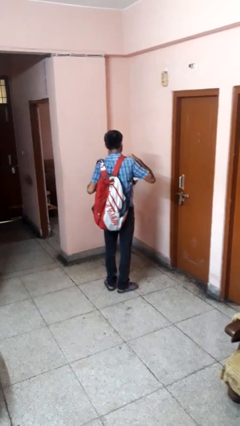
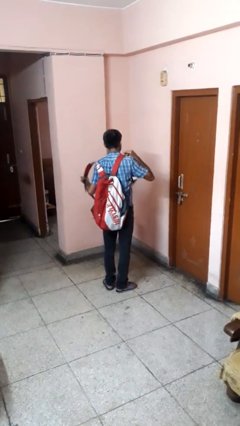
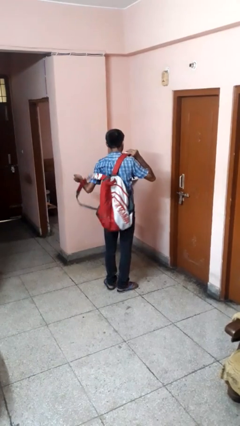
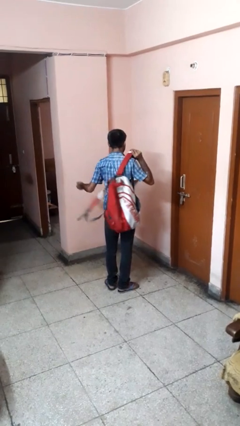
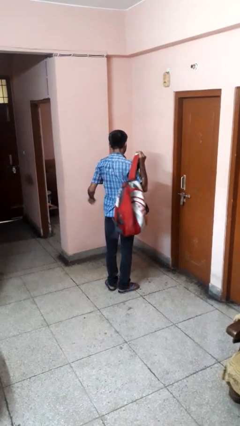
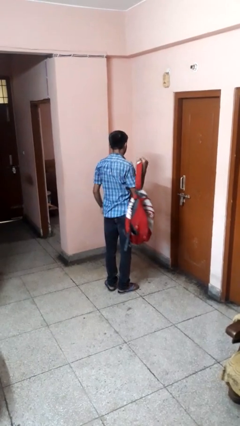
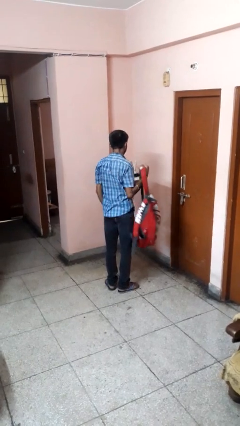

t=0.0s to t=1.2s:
person takes off backpack

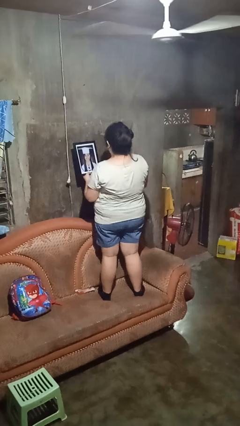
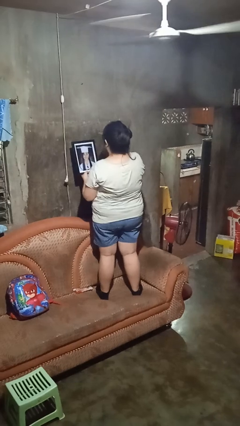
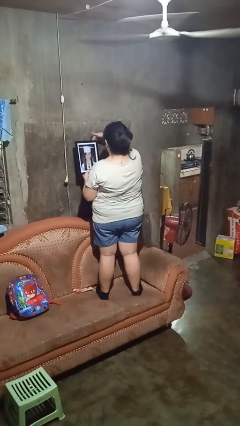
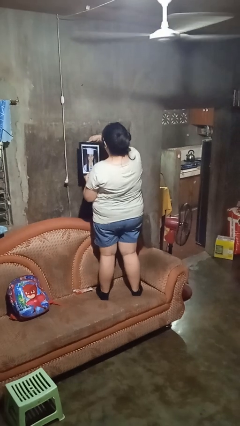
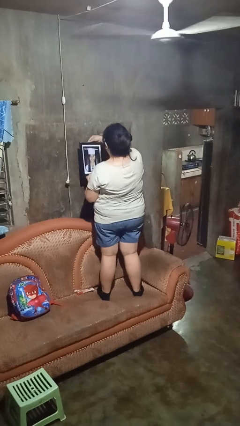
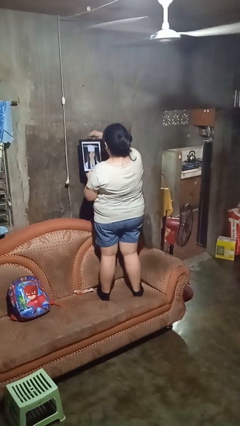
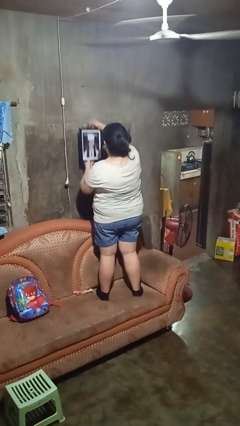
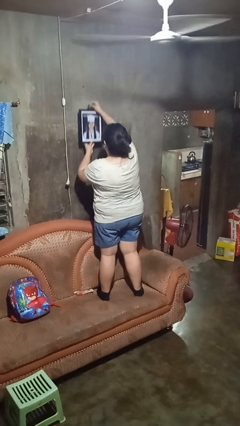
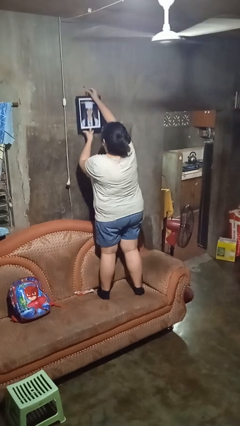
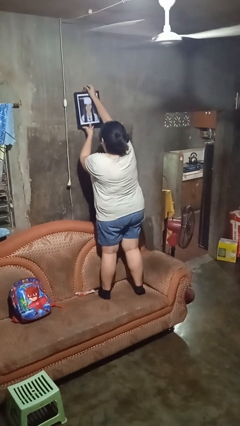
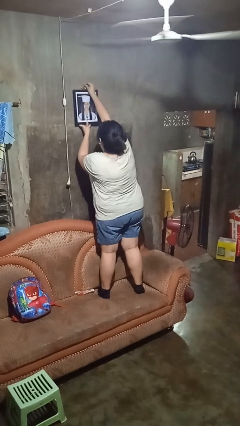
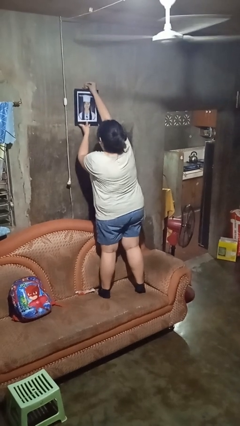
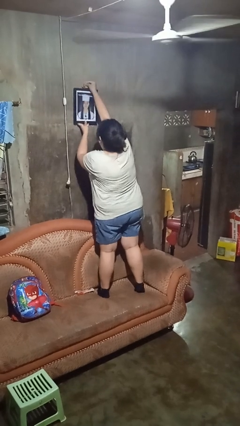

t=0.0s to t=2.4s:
person puts up picture frame

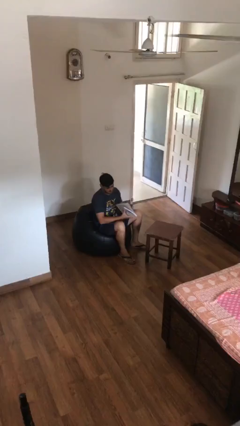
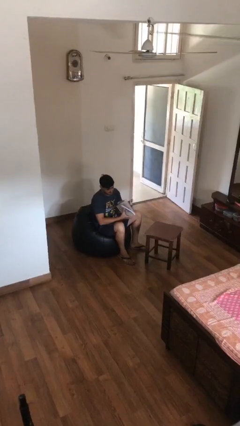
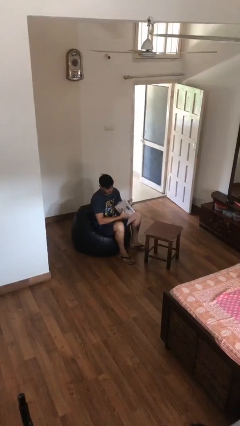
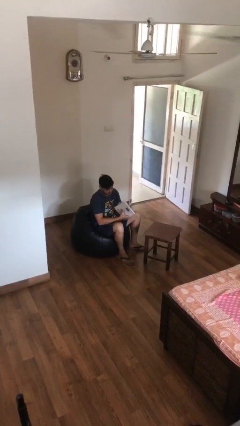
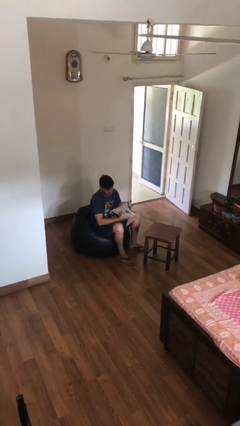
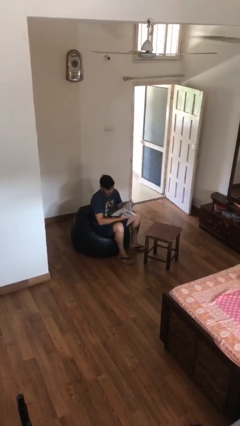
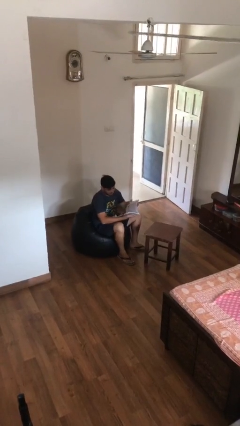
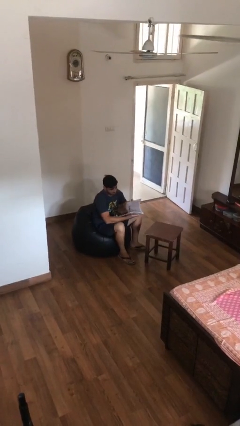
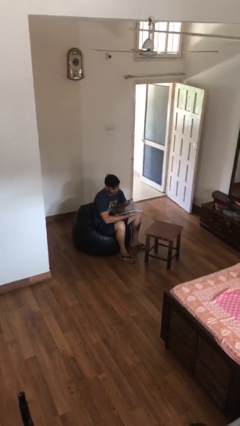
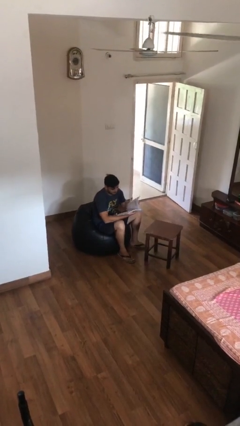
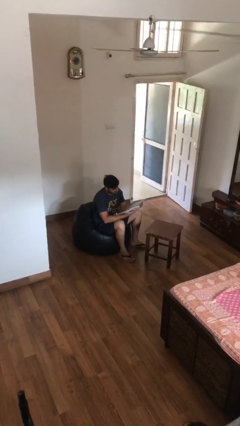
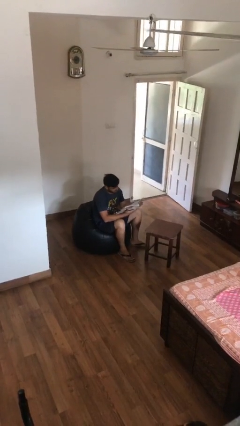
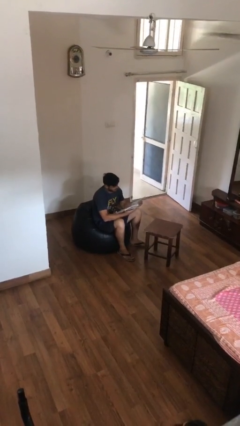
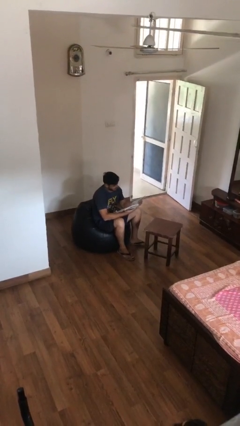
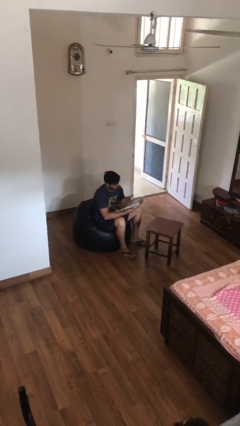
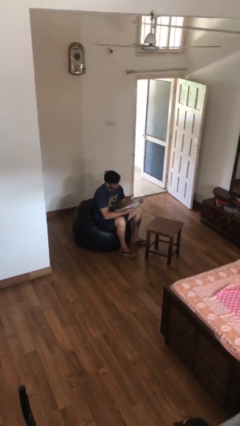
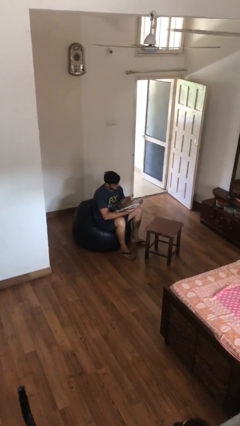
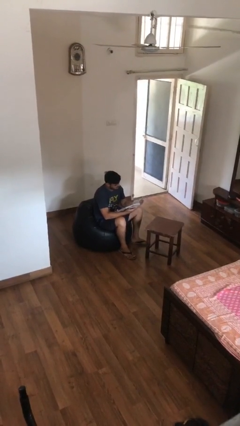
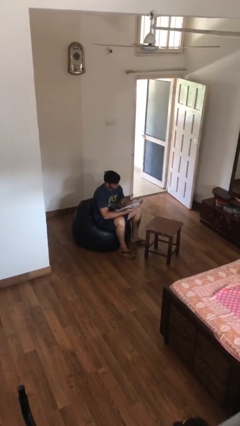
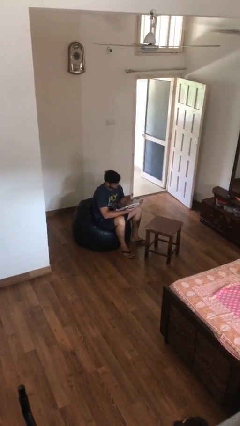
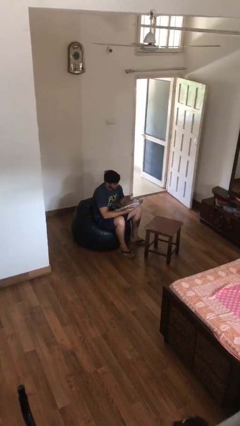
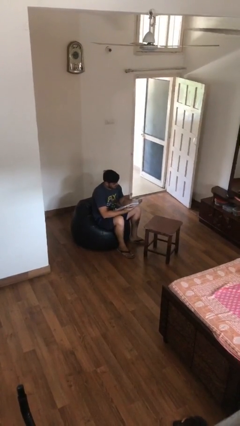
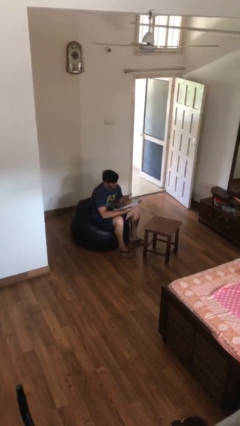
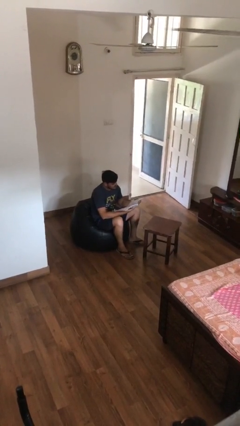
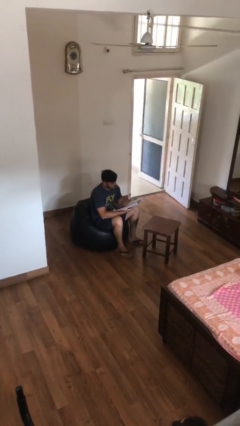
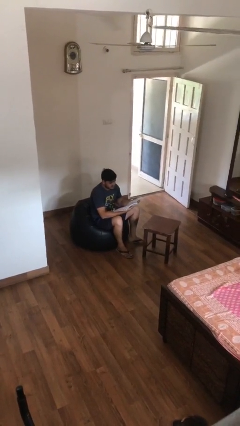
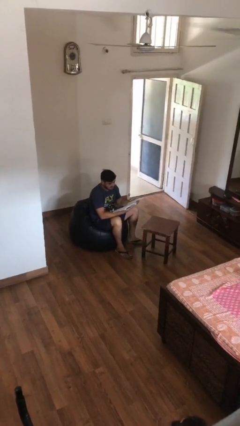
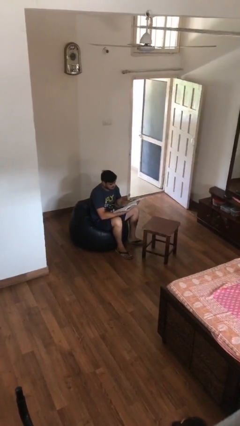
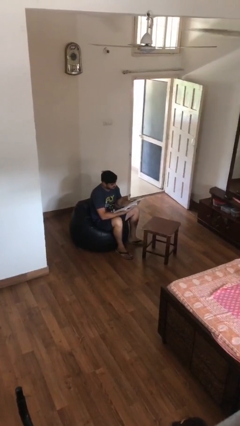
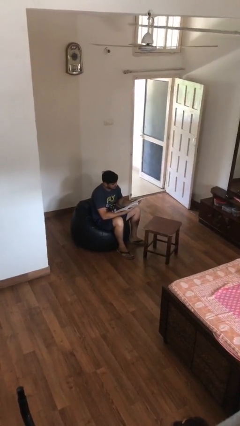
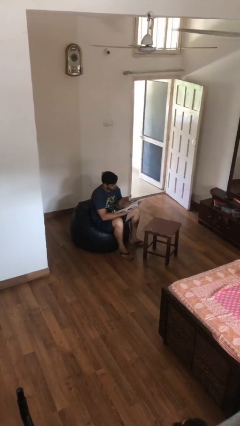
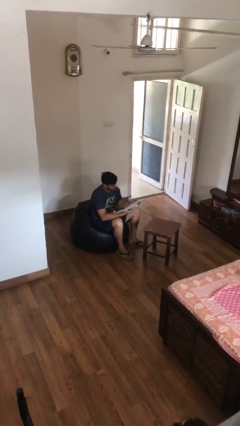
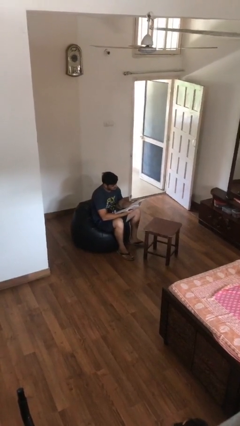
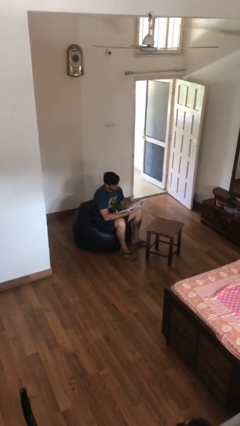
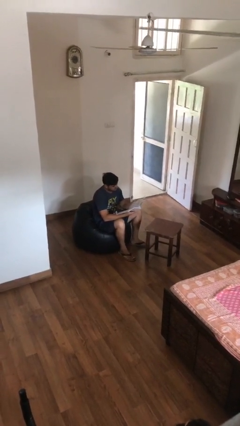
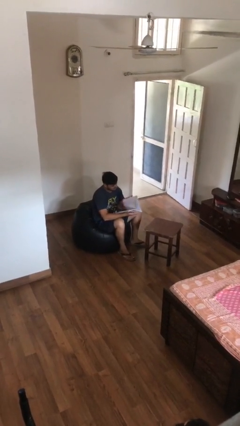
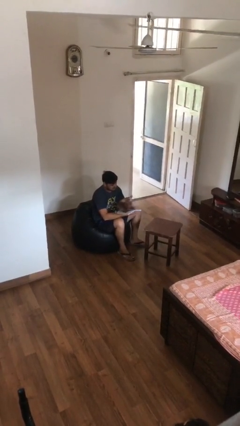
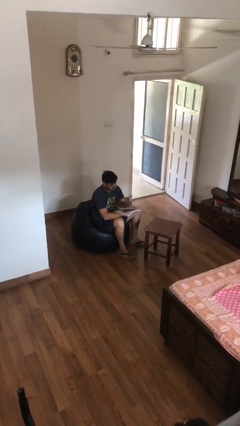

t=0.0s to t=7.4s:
person reads document

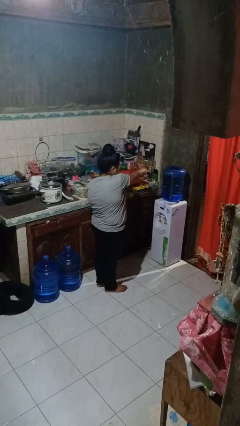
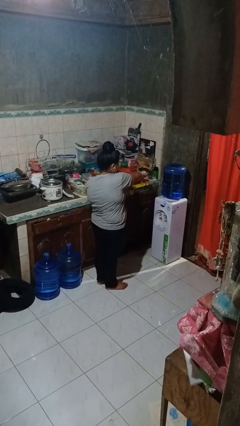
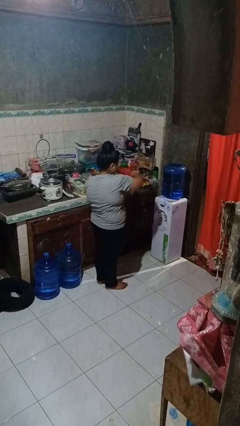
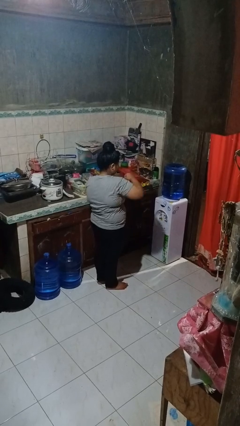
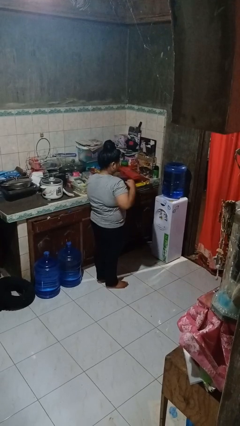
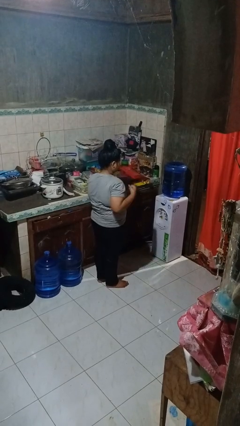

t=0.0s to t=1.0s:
person punches

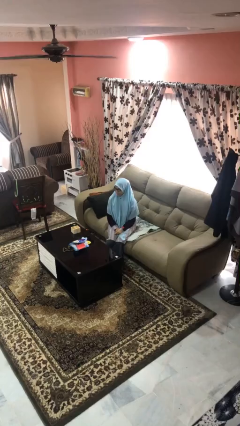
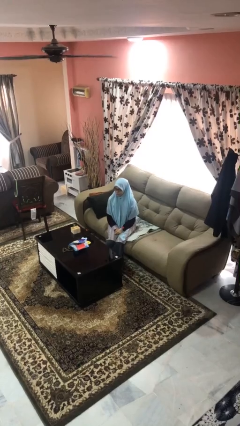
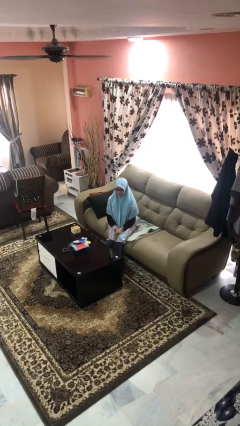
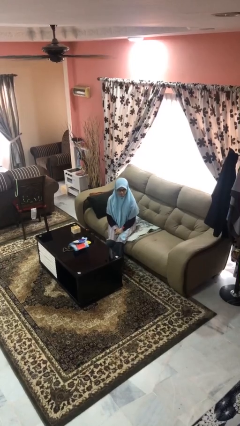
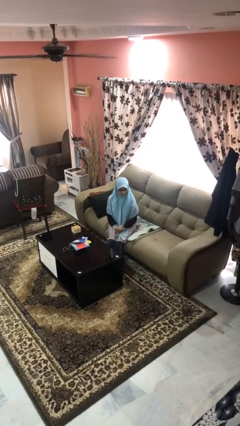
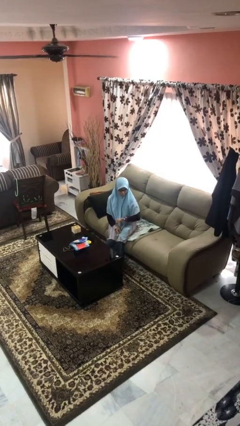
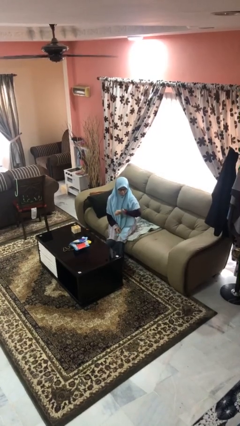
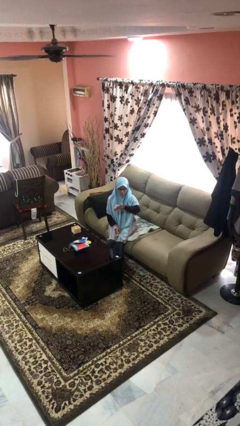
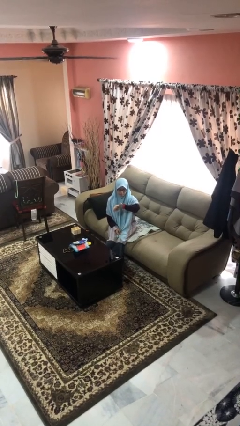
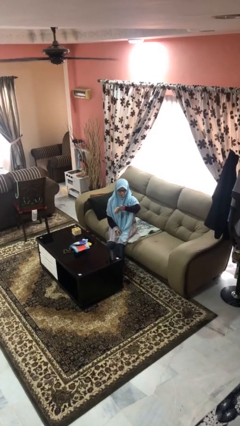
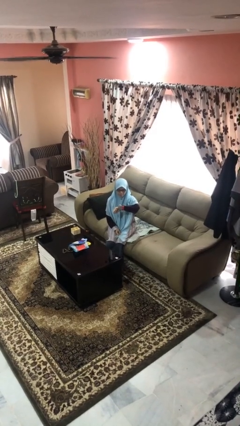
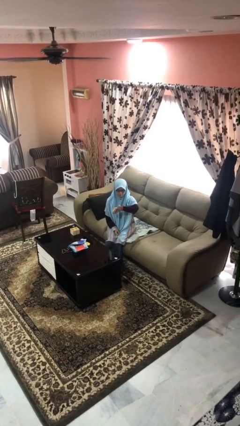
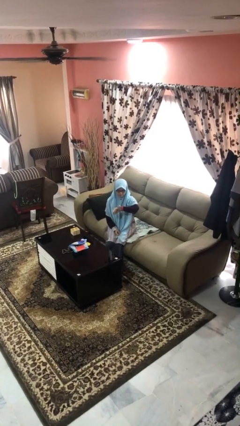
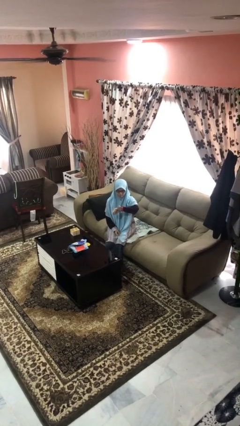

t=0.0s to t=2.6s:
person looks at wristwatch

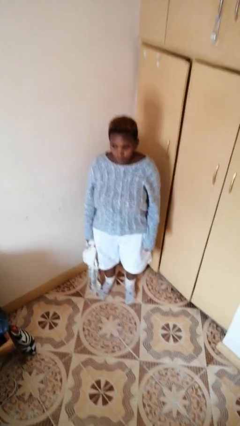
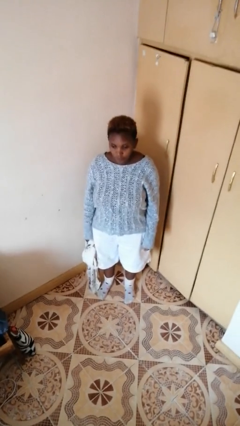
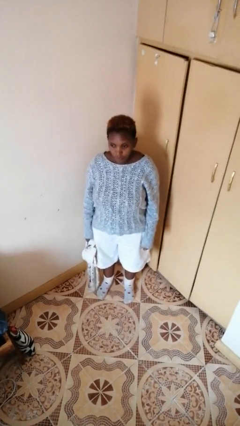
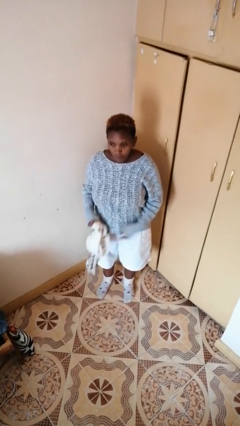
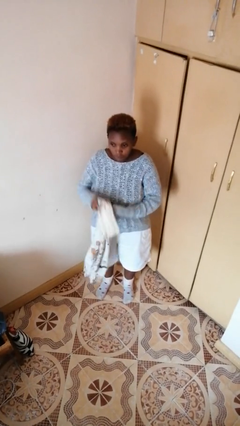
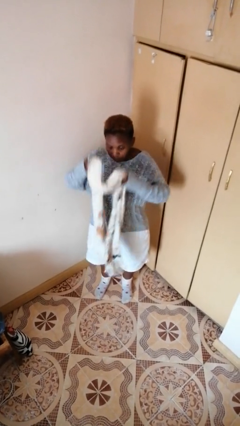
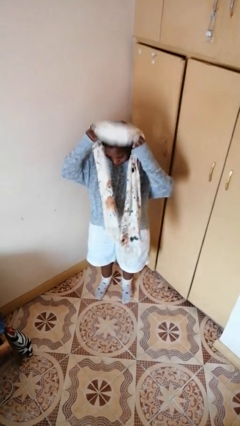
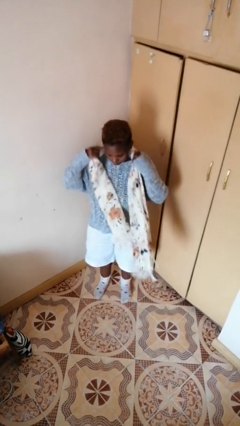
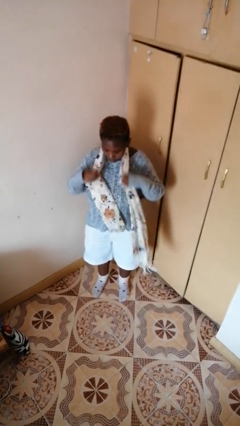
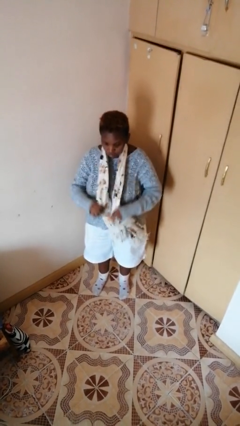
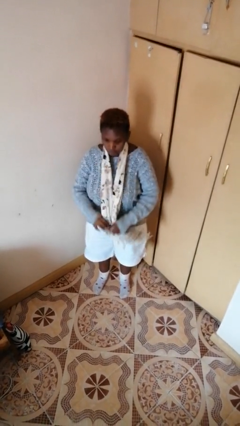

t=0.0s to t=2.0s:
person puts on scarf

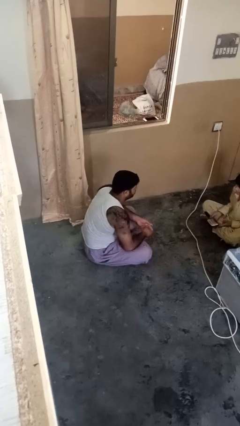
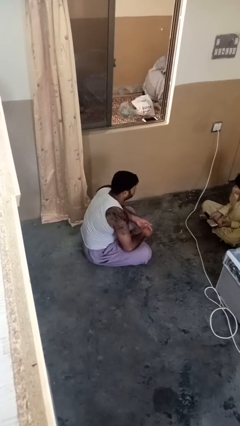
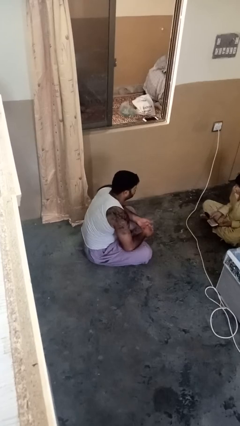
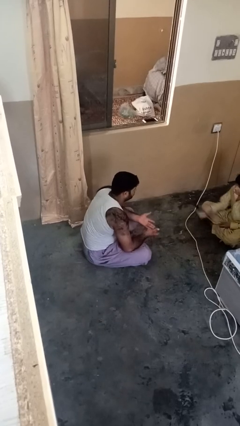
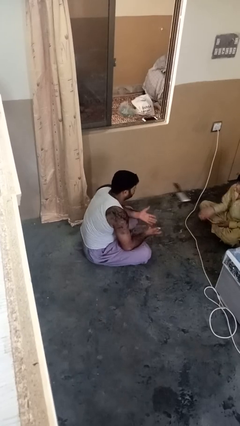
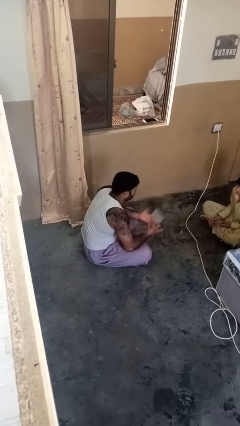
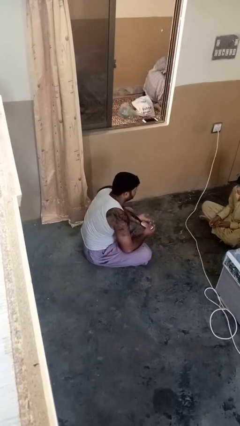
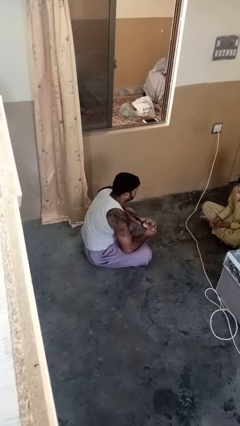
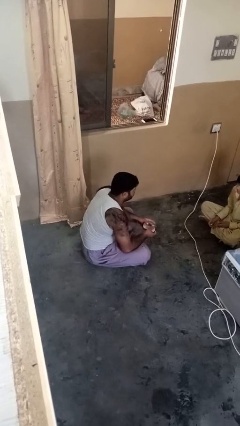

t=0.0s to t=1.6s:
person catches object from person
